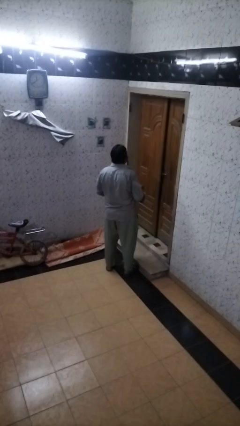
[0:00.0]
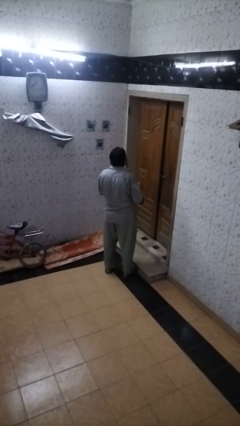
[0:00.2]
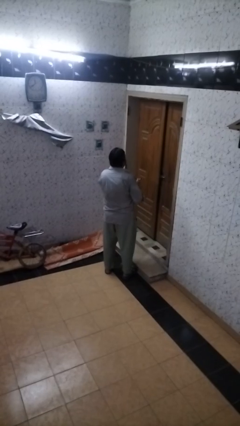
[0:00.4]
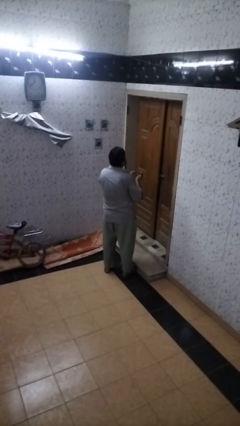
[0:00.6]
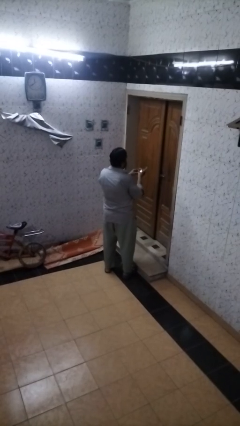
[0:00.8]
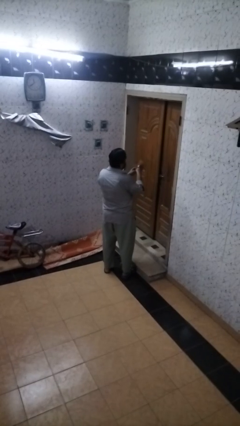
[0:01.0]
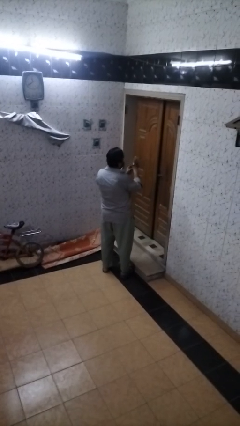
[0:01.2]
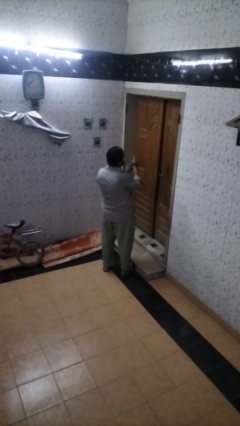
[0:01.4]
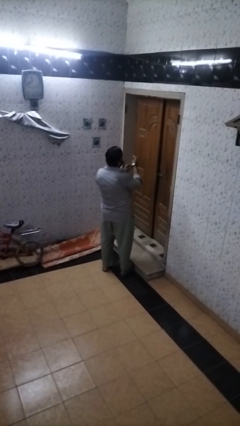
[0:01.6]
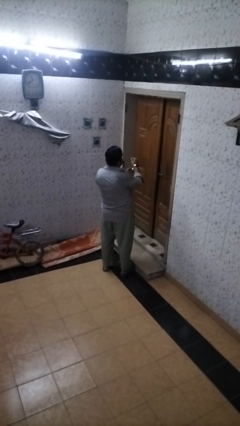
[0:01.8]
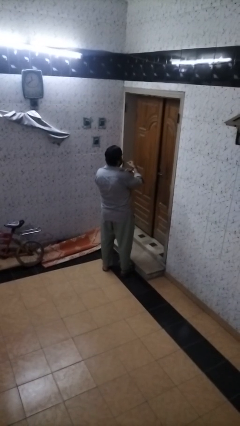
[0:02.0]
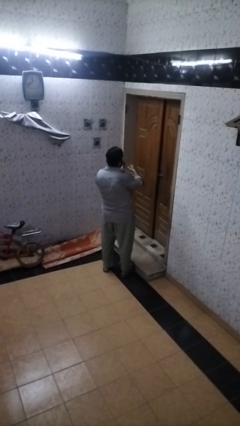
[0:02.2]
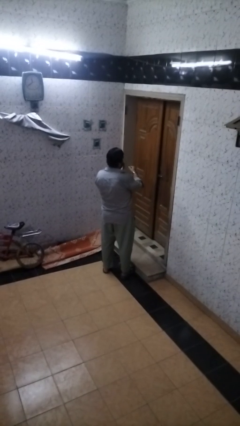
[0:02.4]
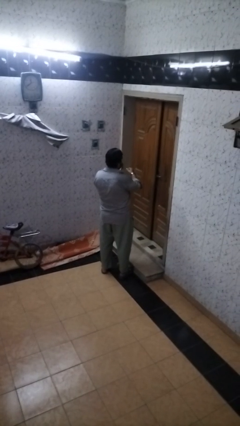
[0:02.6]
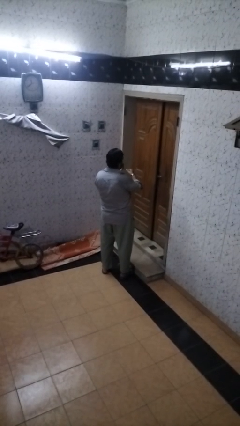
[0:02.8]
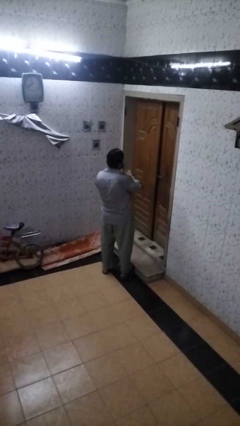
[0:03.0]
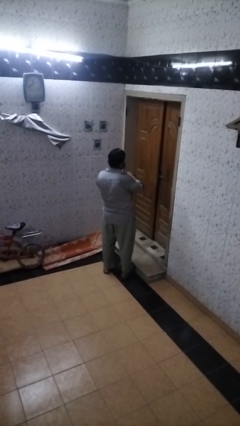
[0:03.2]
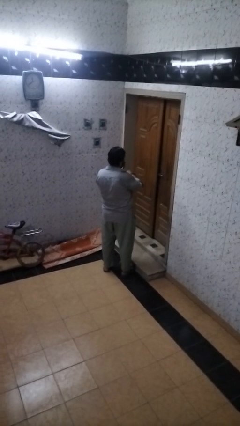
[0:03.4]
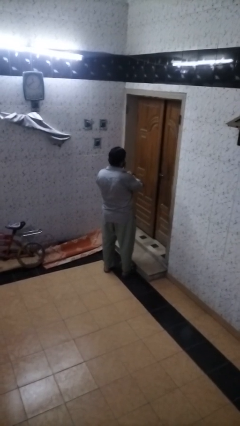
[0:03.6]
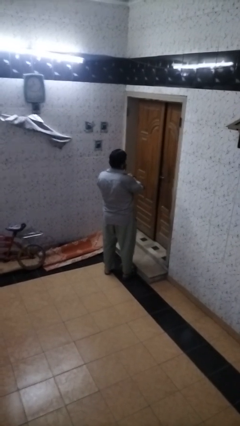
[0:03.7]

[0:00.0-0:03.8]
person puts on wristwatch

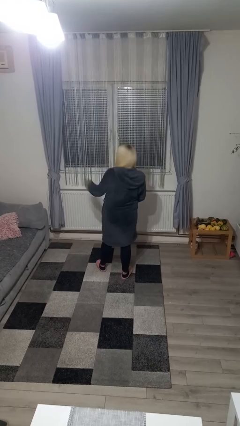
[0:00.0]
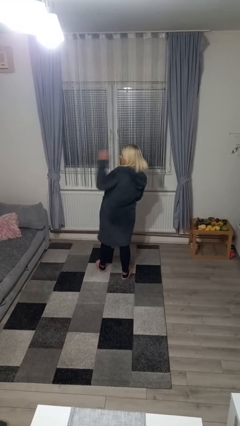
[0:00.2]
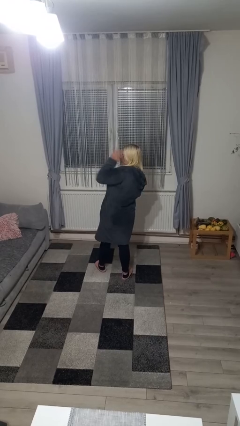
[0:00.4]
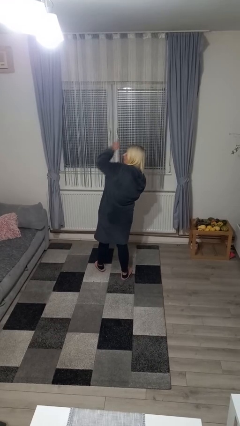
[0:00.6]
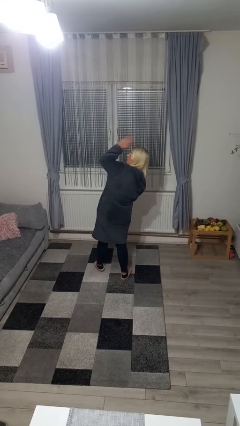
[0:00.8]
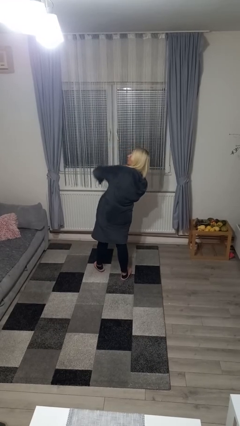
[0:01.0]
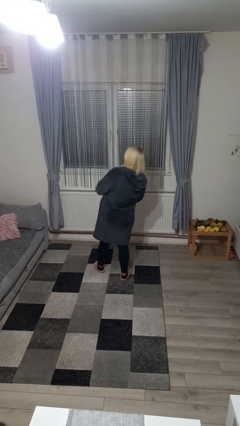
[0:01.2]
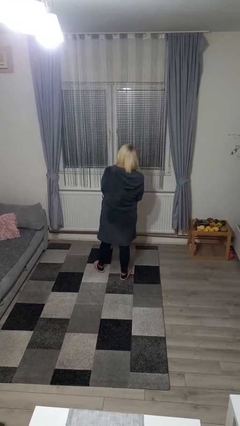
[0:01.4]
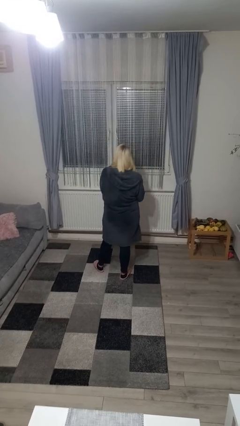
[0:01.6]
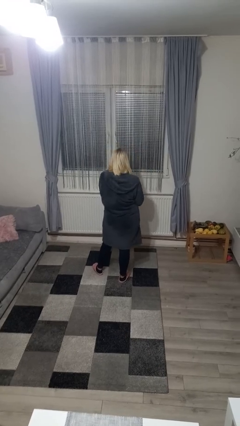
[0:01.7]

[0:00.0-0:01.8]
person swats bug

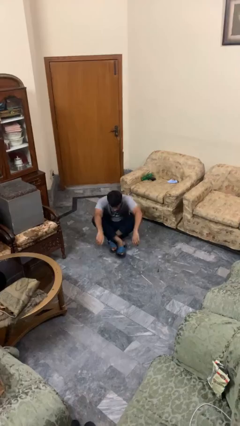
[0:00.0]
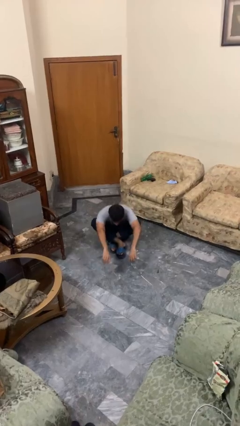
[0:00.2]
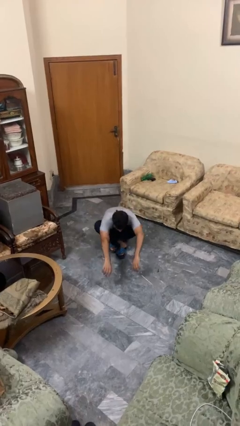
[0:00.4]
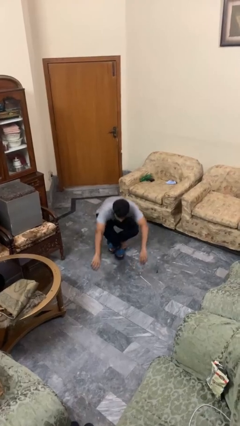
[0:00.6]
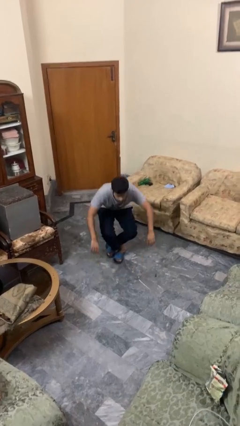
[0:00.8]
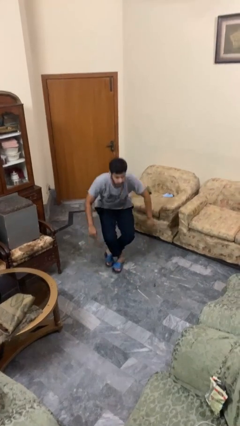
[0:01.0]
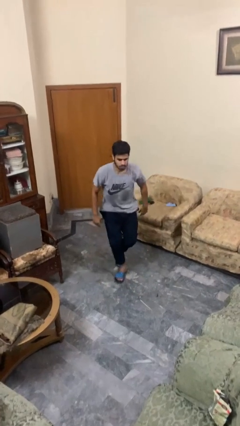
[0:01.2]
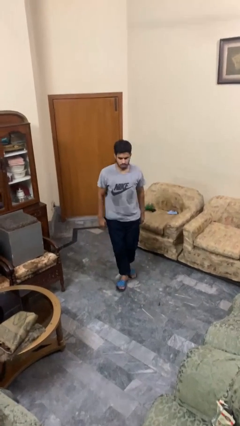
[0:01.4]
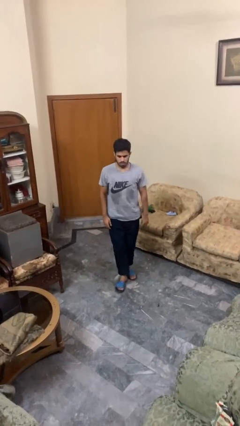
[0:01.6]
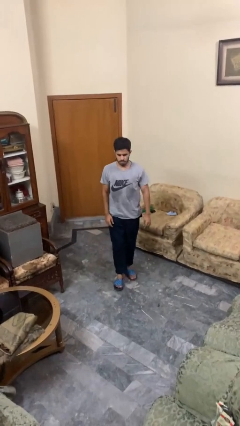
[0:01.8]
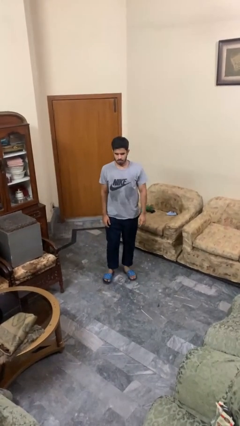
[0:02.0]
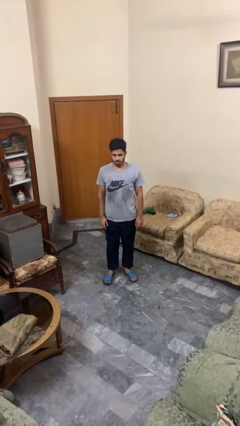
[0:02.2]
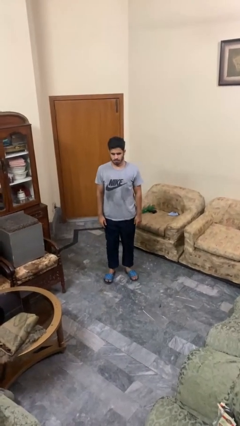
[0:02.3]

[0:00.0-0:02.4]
person stands up from floor

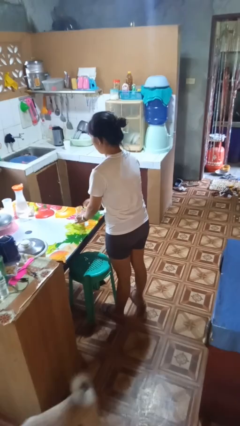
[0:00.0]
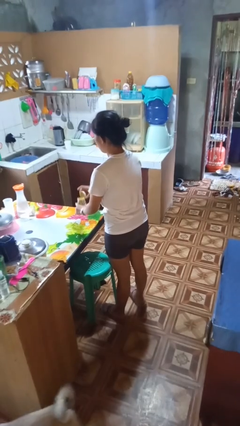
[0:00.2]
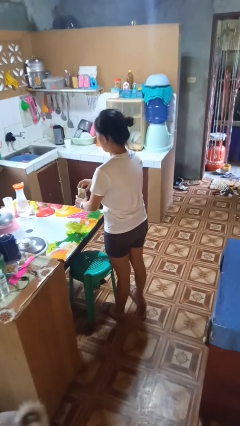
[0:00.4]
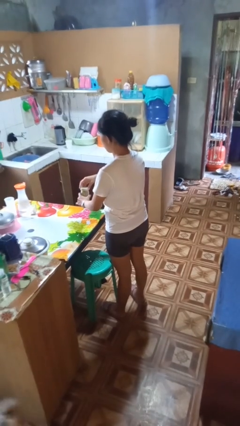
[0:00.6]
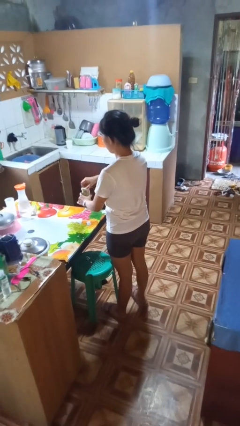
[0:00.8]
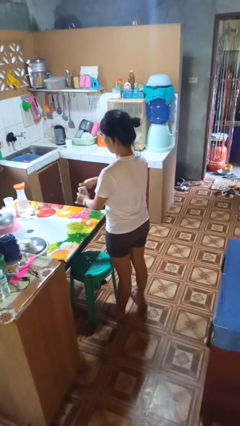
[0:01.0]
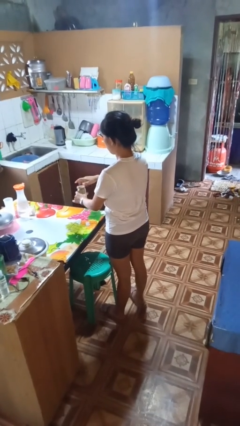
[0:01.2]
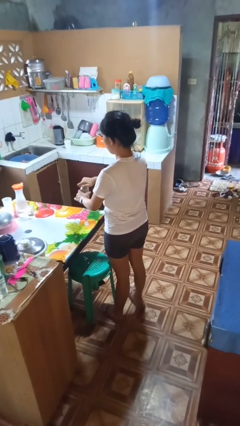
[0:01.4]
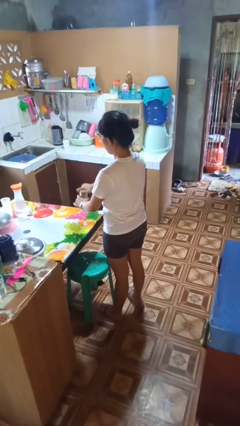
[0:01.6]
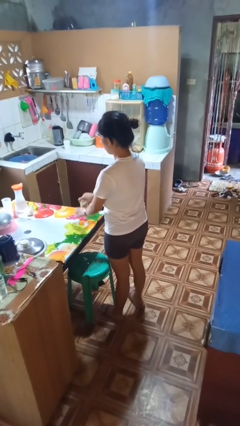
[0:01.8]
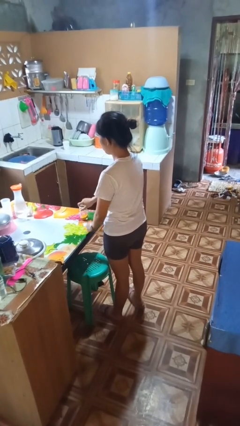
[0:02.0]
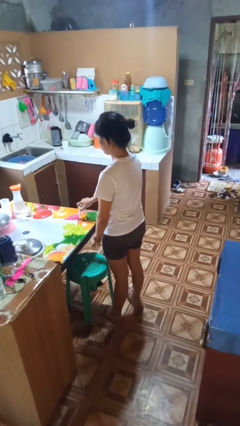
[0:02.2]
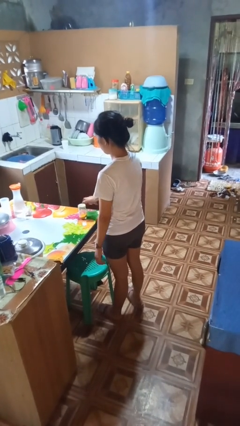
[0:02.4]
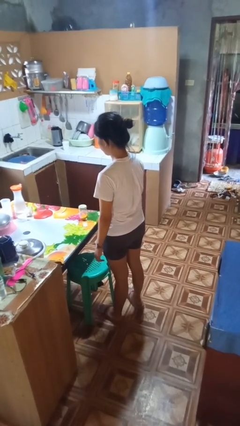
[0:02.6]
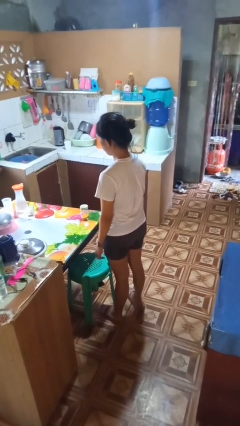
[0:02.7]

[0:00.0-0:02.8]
person closes jar

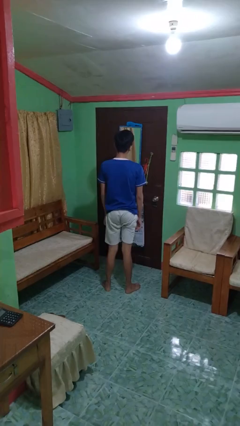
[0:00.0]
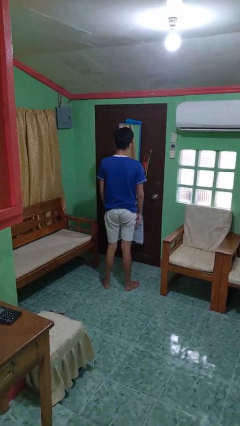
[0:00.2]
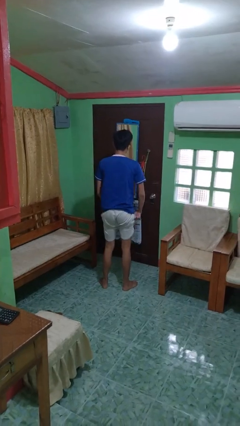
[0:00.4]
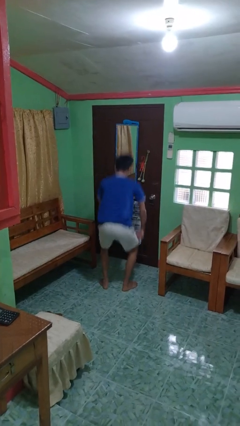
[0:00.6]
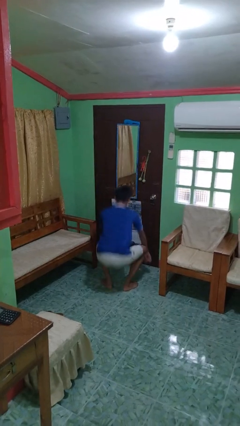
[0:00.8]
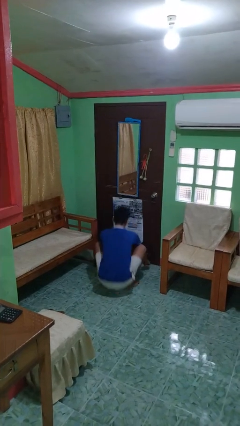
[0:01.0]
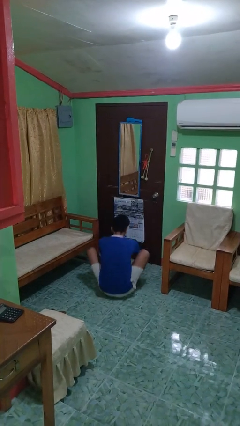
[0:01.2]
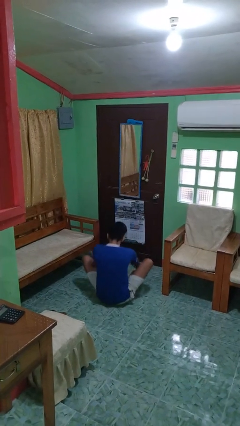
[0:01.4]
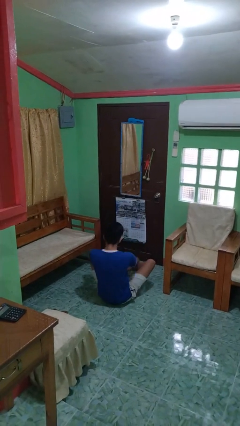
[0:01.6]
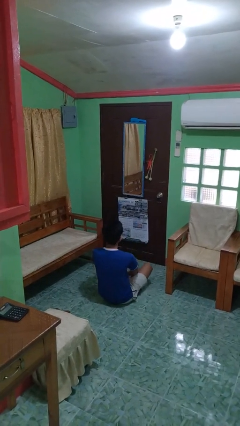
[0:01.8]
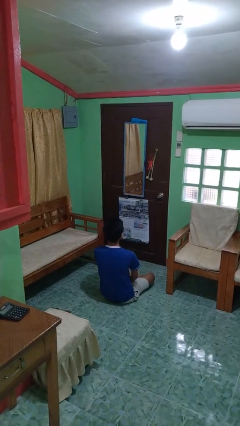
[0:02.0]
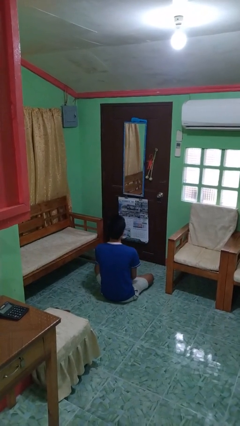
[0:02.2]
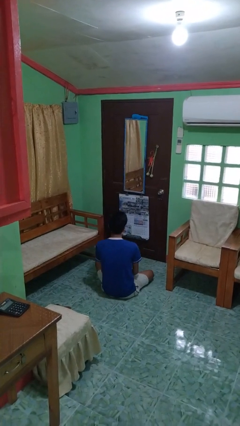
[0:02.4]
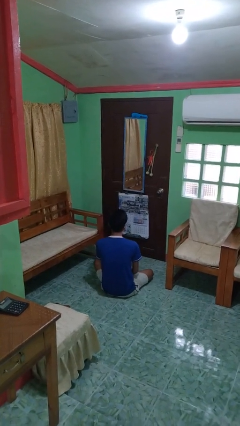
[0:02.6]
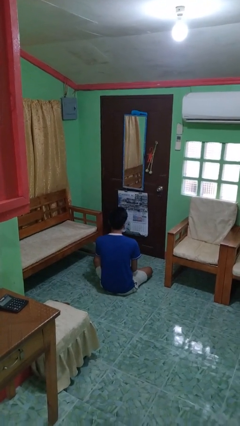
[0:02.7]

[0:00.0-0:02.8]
person squats

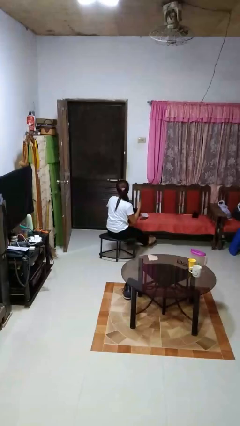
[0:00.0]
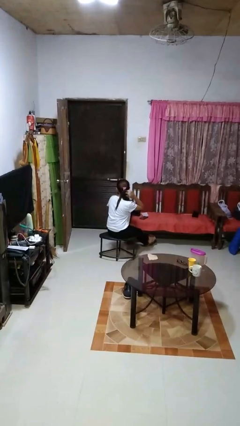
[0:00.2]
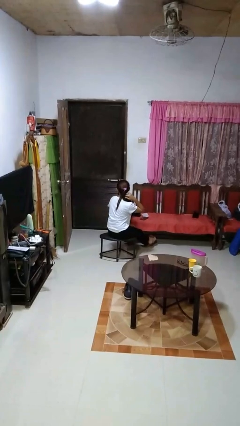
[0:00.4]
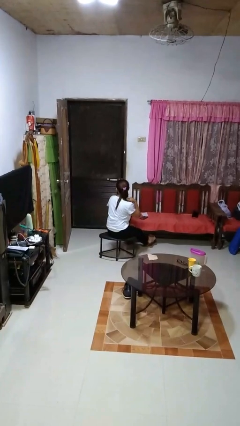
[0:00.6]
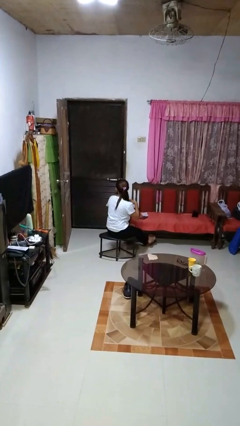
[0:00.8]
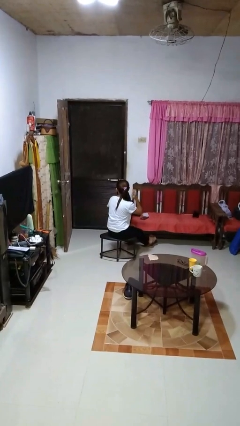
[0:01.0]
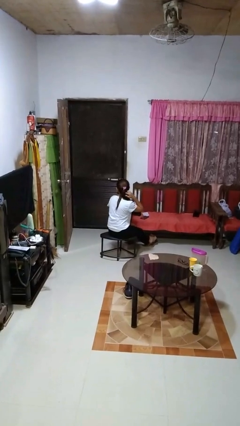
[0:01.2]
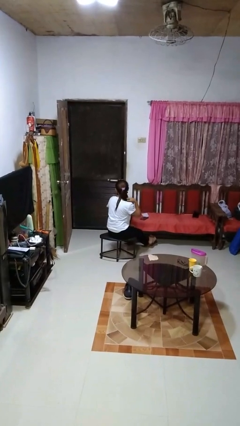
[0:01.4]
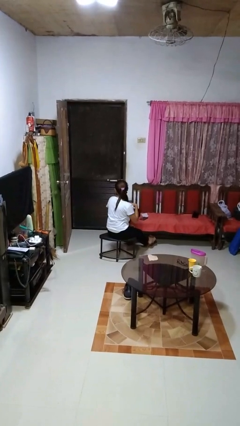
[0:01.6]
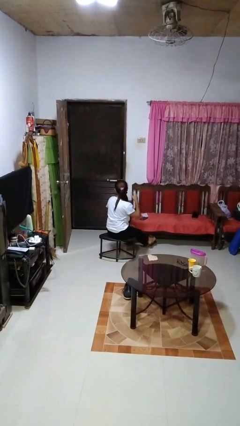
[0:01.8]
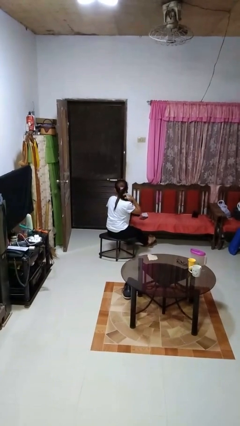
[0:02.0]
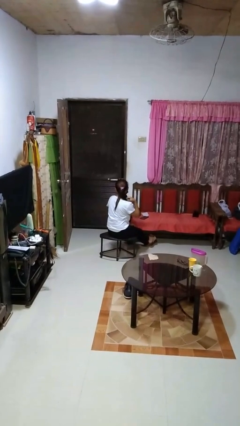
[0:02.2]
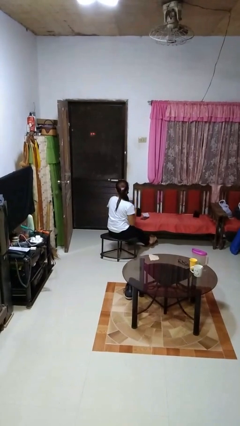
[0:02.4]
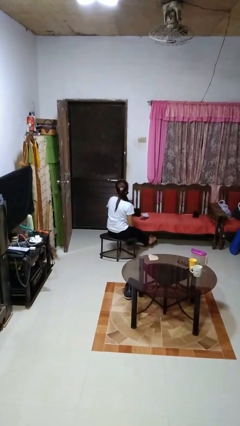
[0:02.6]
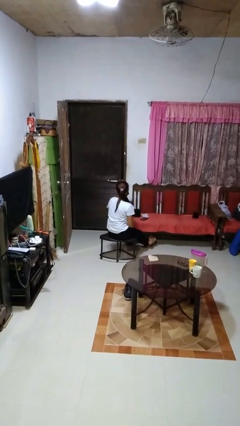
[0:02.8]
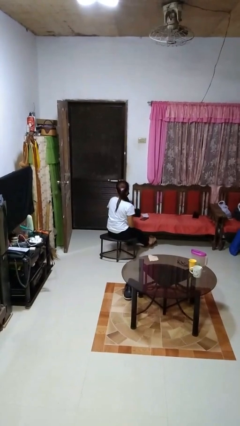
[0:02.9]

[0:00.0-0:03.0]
person strokes hair

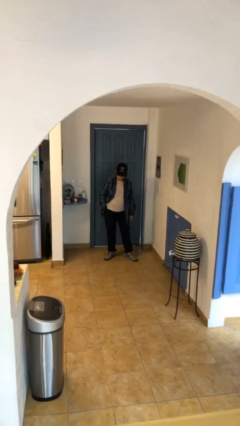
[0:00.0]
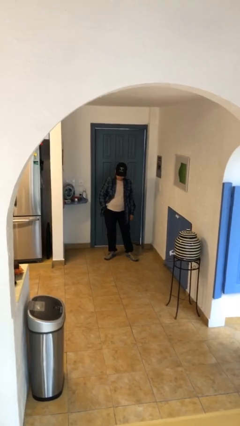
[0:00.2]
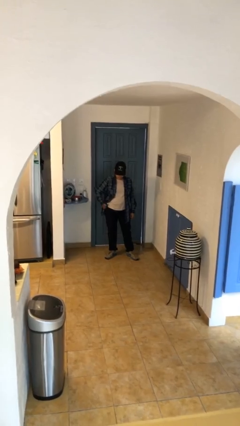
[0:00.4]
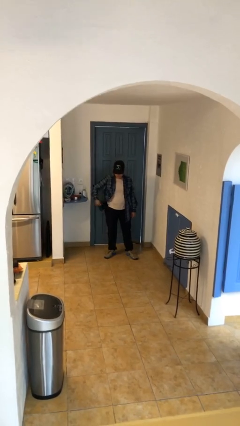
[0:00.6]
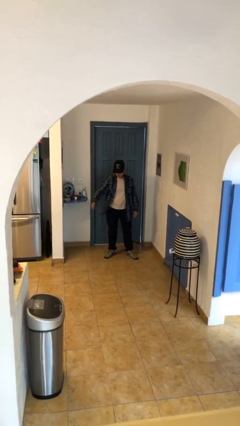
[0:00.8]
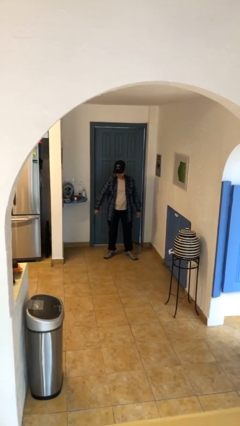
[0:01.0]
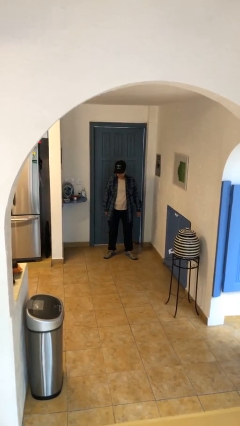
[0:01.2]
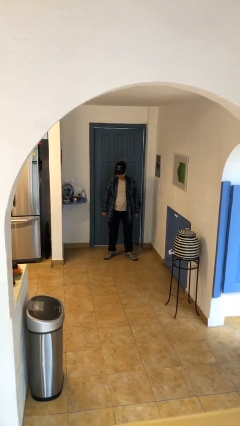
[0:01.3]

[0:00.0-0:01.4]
person puts hands in back pockets
